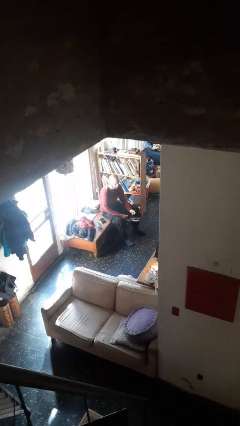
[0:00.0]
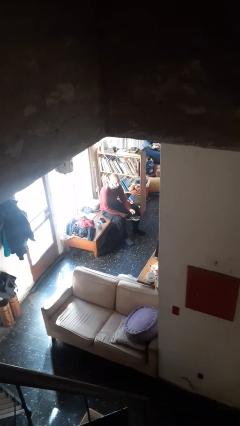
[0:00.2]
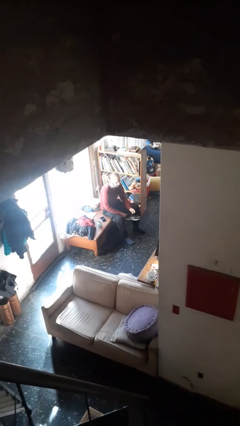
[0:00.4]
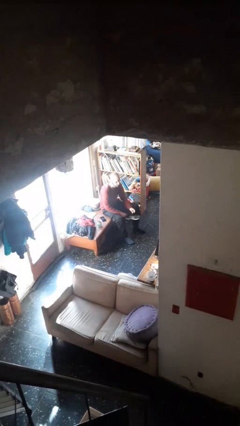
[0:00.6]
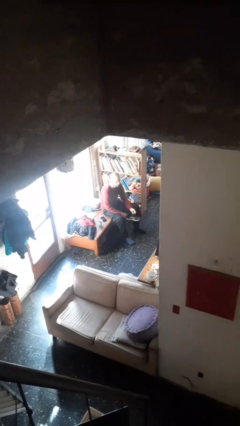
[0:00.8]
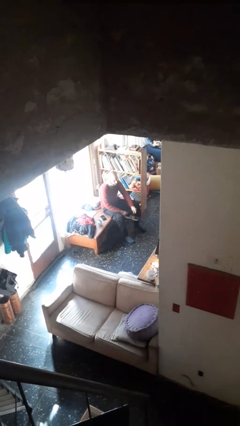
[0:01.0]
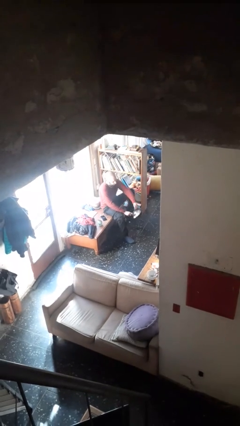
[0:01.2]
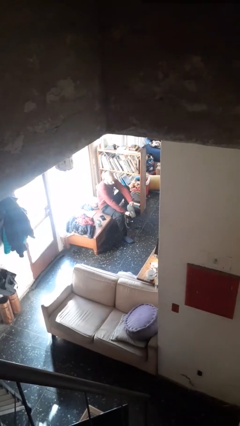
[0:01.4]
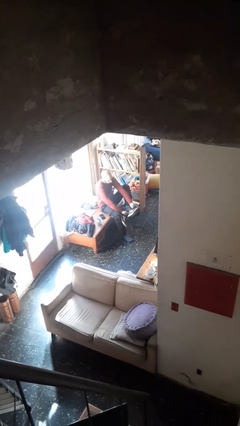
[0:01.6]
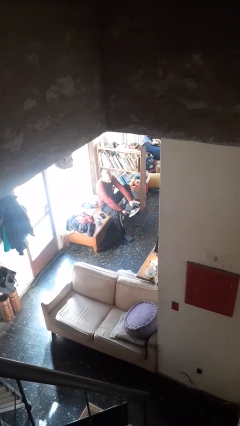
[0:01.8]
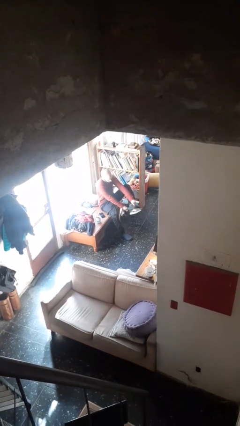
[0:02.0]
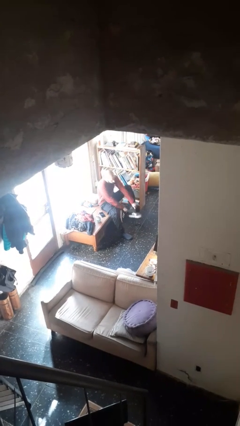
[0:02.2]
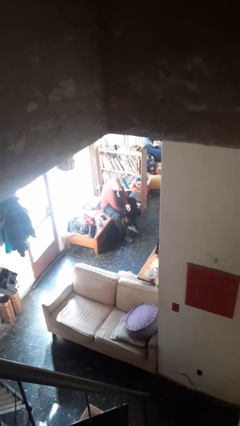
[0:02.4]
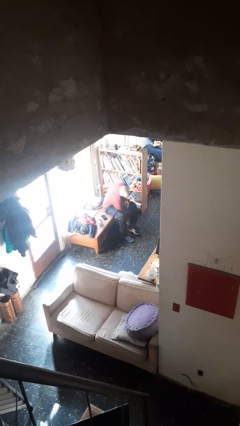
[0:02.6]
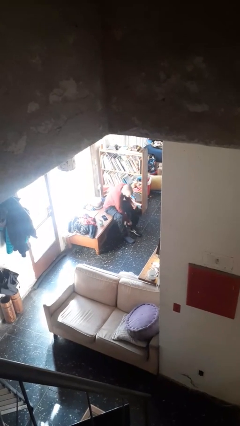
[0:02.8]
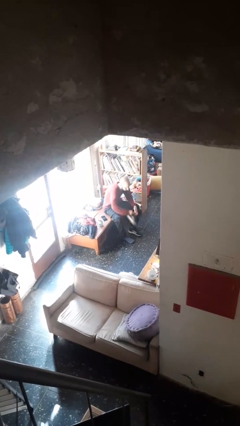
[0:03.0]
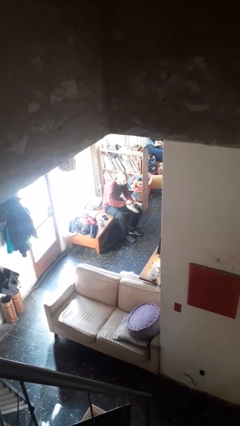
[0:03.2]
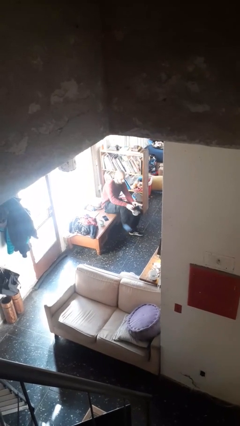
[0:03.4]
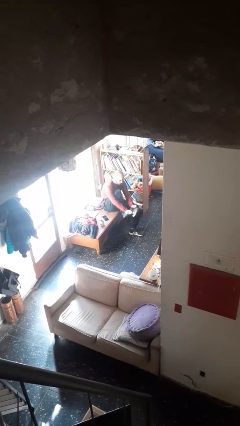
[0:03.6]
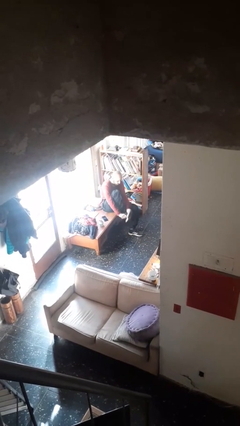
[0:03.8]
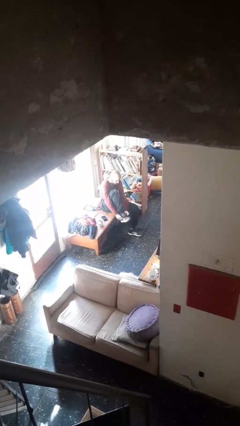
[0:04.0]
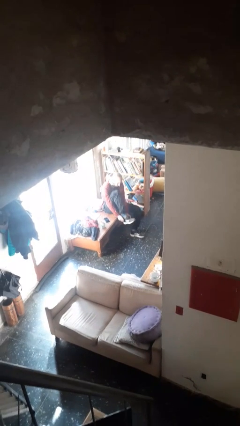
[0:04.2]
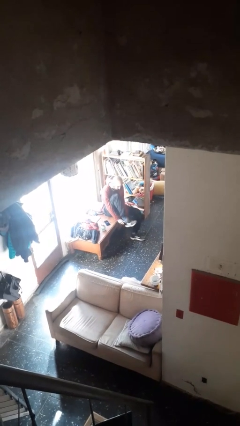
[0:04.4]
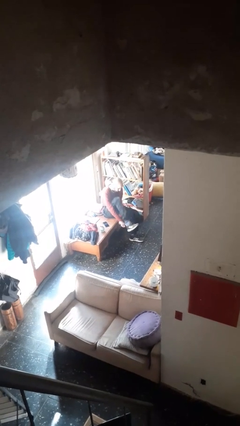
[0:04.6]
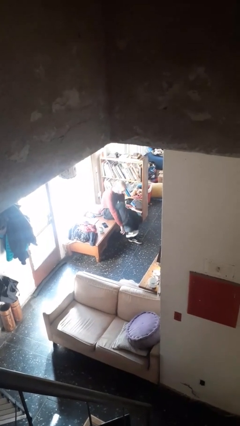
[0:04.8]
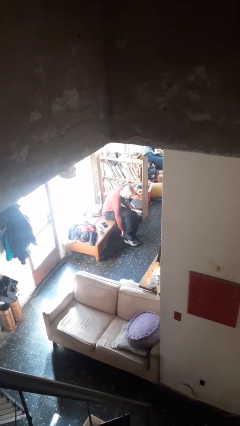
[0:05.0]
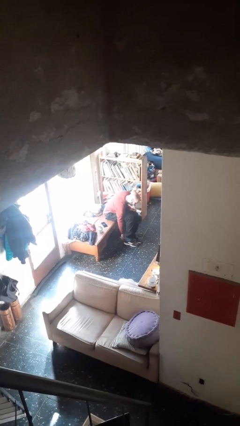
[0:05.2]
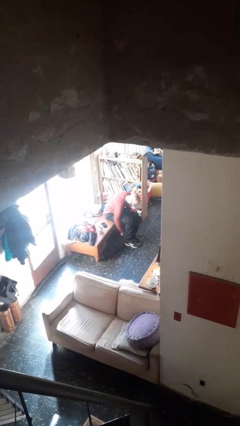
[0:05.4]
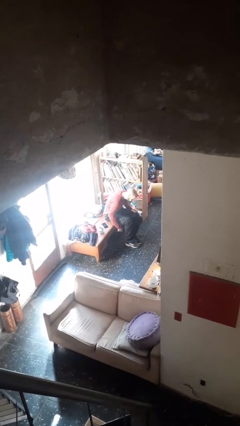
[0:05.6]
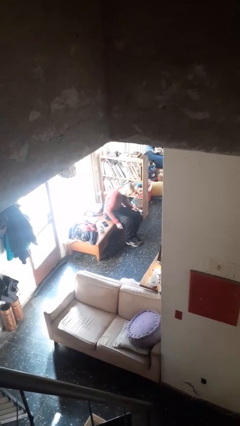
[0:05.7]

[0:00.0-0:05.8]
person puts on shoes

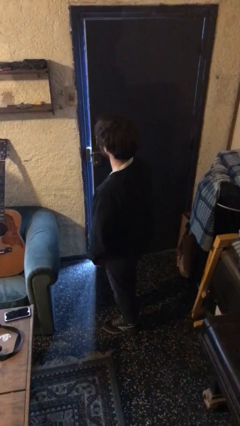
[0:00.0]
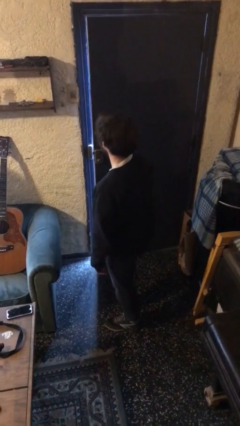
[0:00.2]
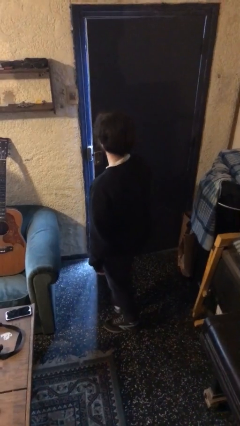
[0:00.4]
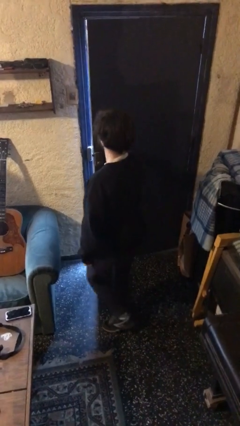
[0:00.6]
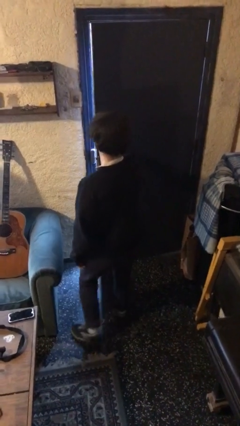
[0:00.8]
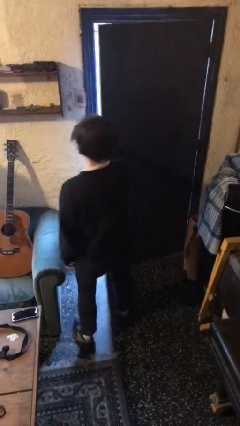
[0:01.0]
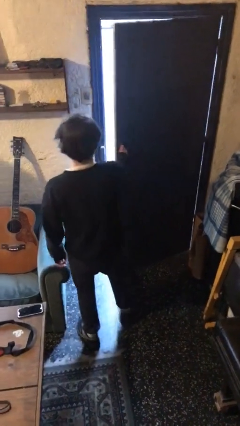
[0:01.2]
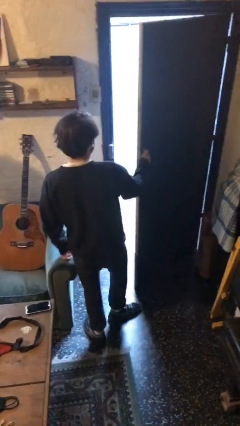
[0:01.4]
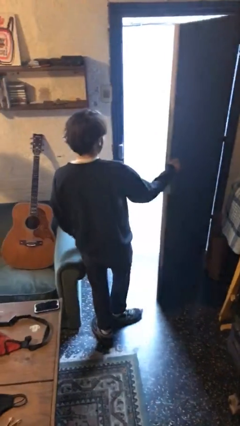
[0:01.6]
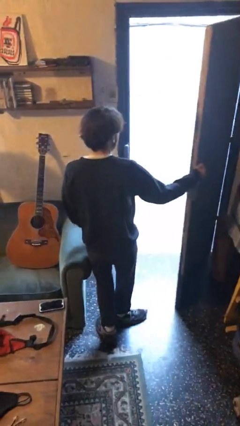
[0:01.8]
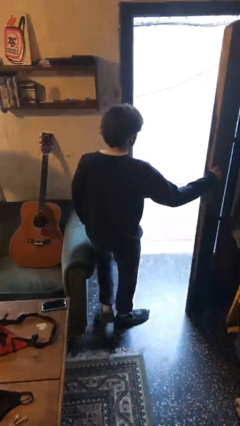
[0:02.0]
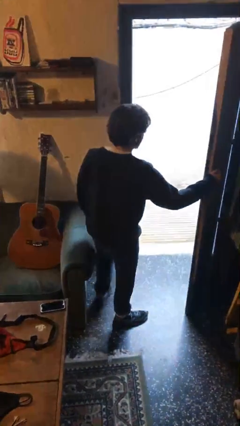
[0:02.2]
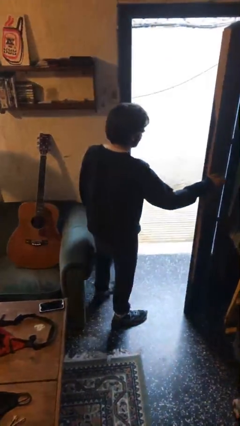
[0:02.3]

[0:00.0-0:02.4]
person opens facility door

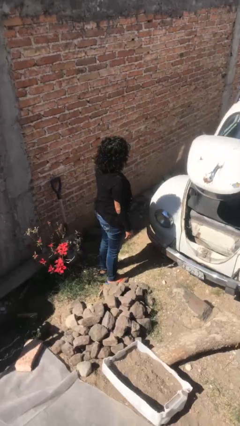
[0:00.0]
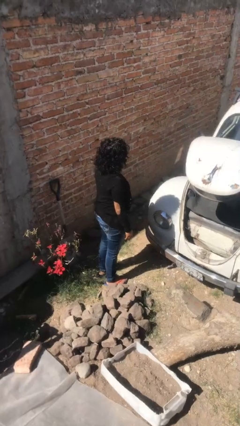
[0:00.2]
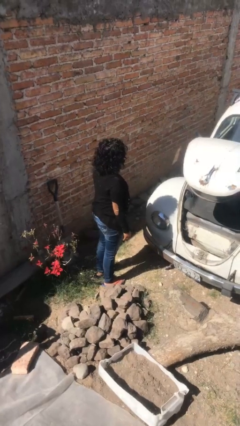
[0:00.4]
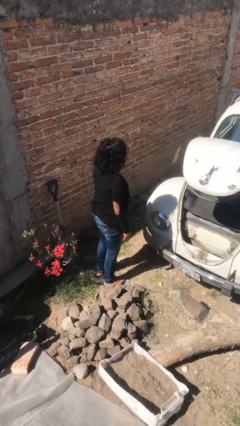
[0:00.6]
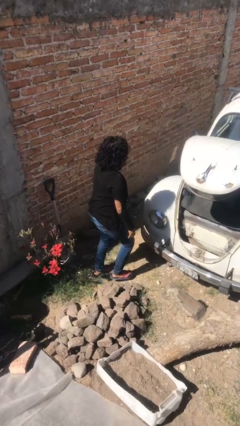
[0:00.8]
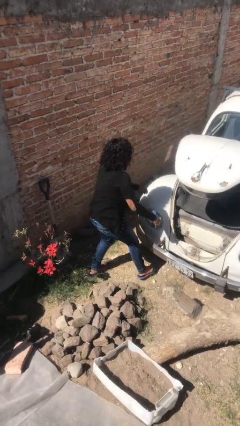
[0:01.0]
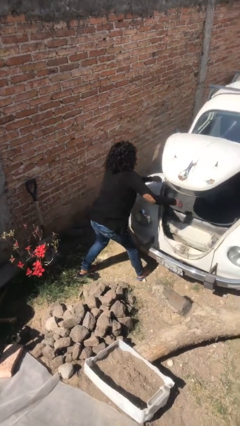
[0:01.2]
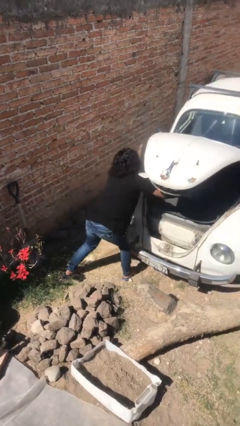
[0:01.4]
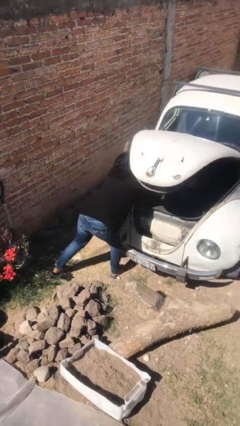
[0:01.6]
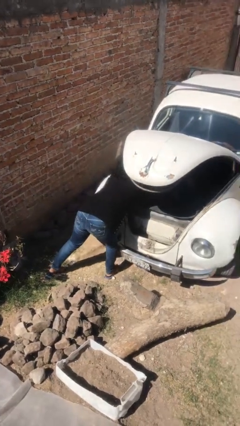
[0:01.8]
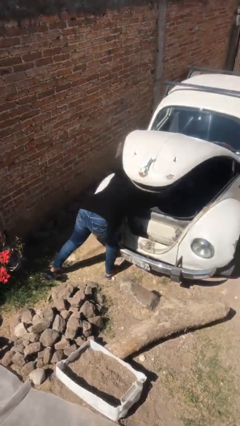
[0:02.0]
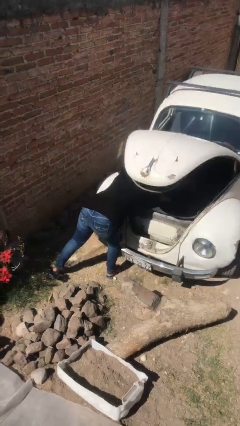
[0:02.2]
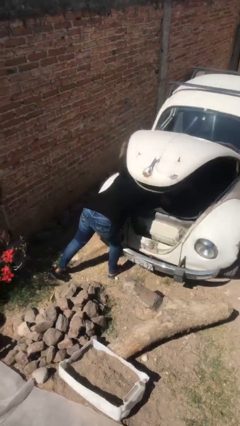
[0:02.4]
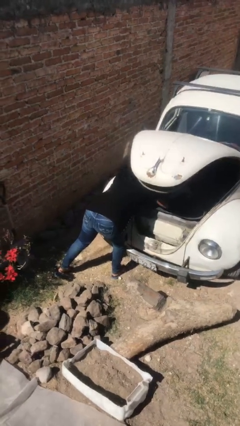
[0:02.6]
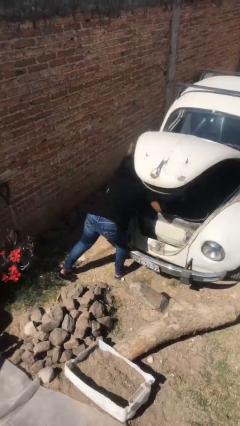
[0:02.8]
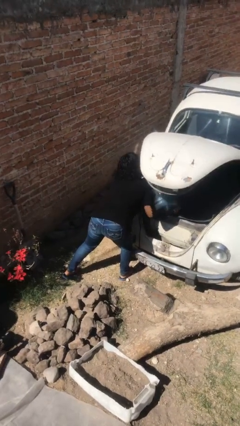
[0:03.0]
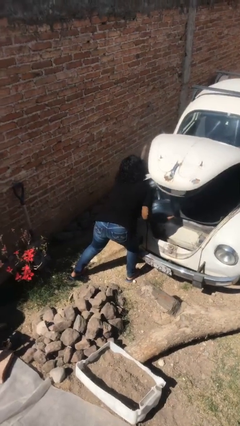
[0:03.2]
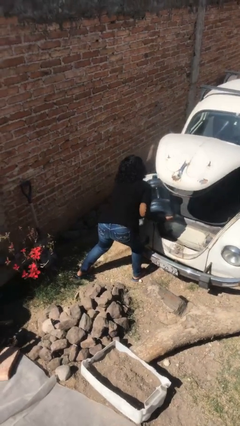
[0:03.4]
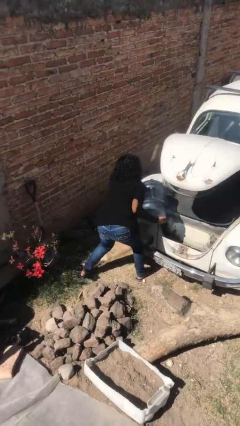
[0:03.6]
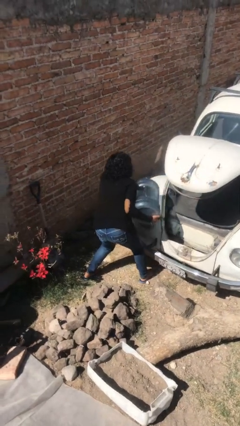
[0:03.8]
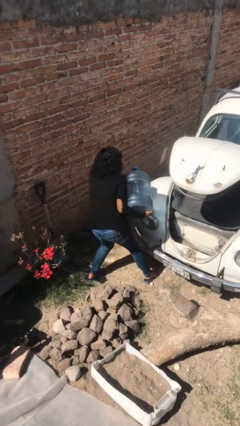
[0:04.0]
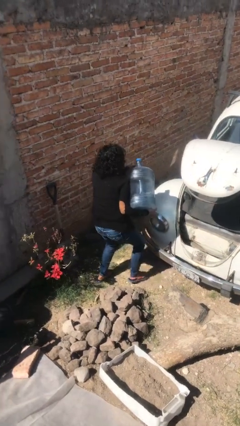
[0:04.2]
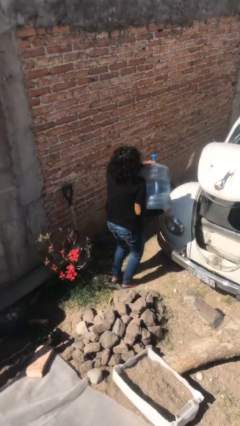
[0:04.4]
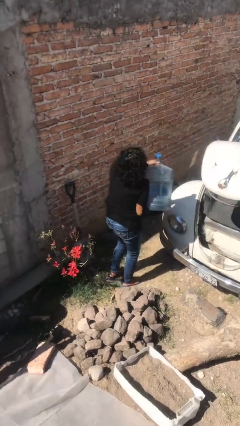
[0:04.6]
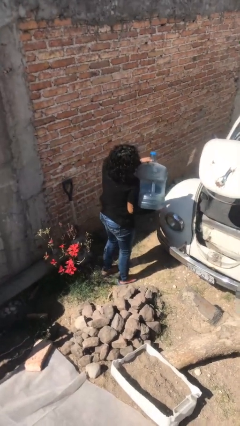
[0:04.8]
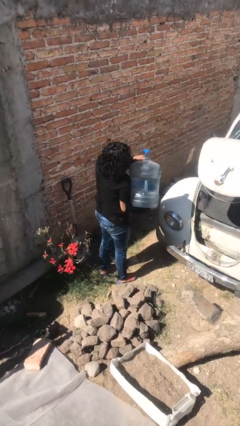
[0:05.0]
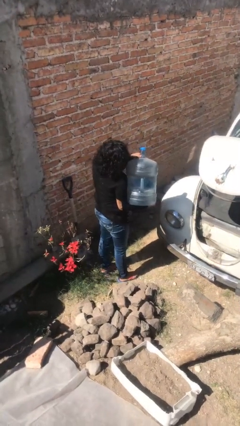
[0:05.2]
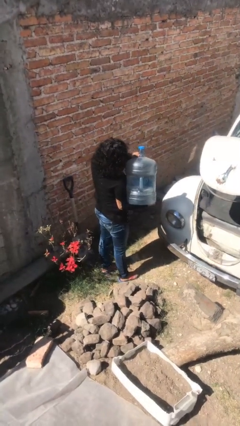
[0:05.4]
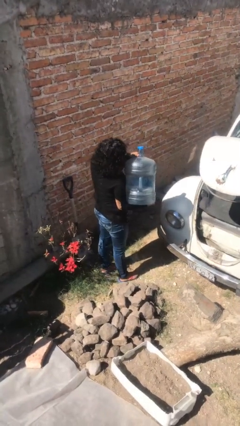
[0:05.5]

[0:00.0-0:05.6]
person unloads car

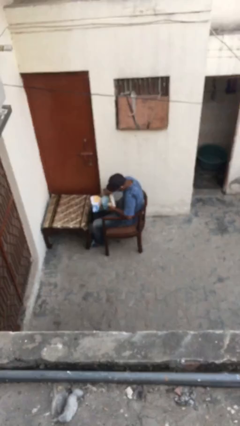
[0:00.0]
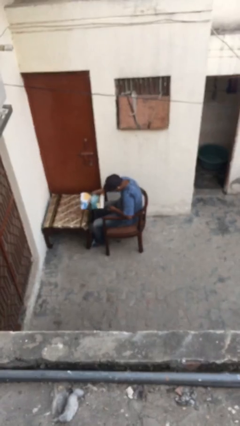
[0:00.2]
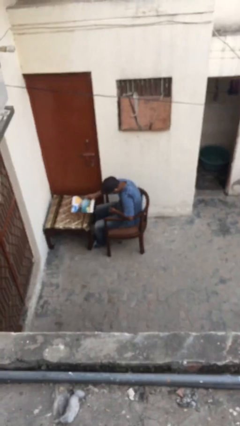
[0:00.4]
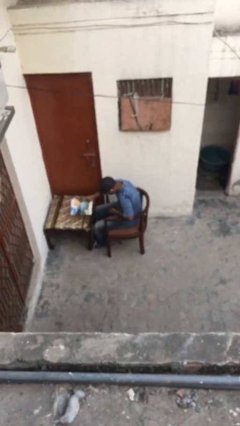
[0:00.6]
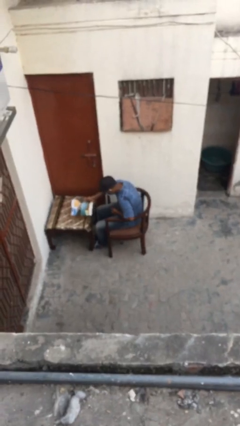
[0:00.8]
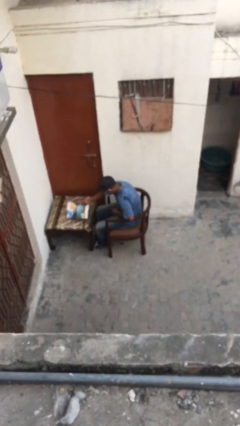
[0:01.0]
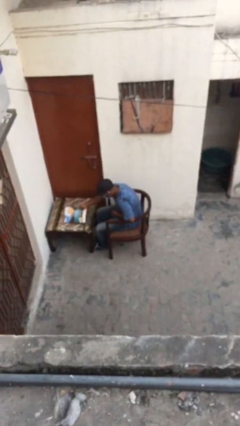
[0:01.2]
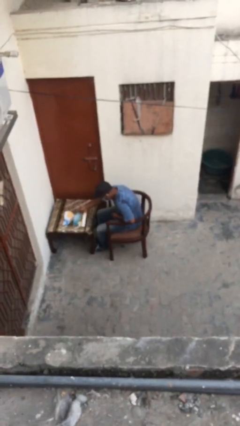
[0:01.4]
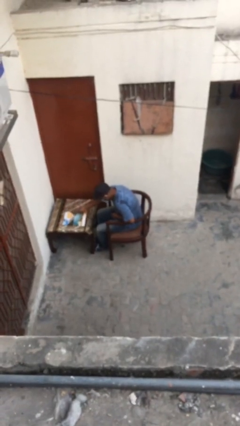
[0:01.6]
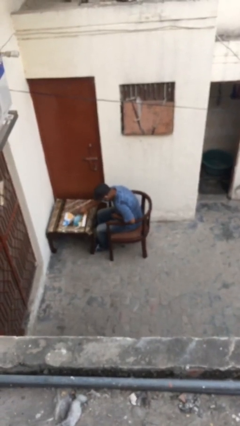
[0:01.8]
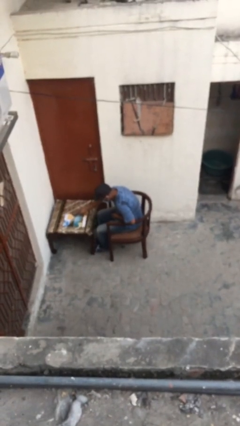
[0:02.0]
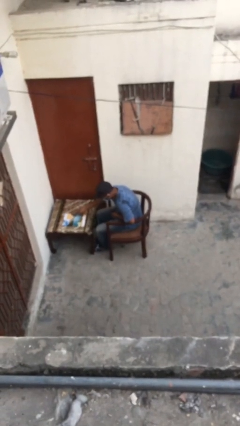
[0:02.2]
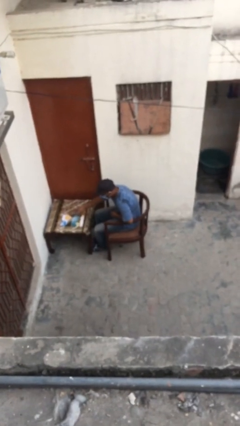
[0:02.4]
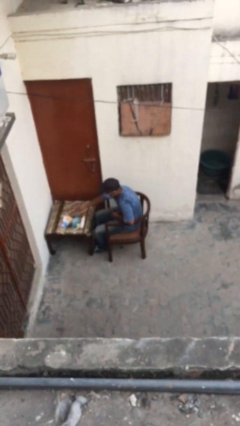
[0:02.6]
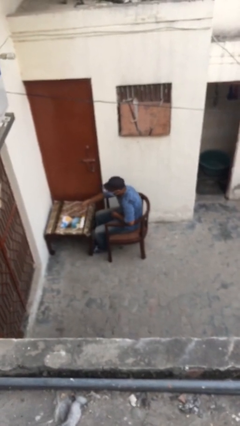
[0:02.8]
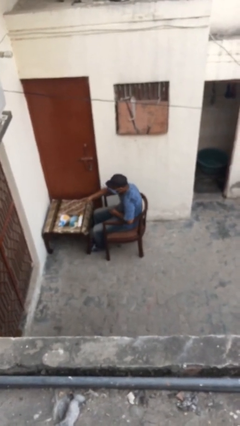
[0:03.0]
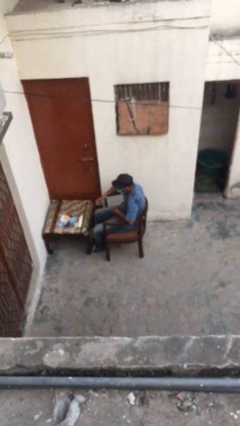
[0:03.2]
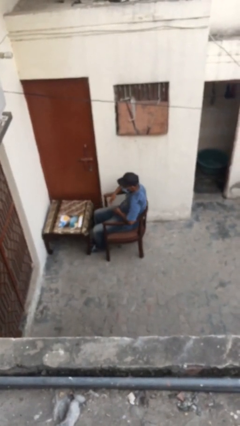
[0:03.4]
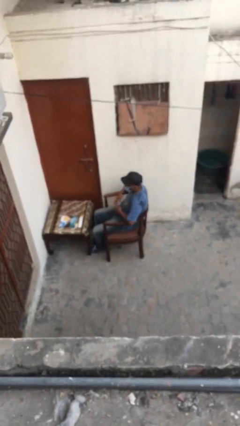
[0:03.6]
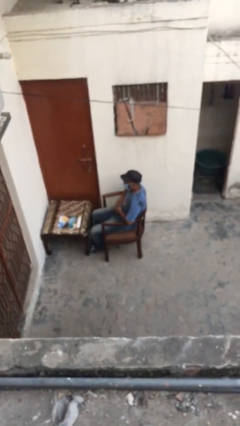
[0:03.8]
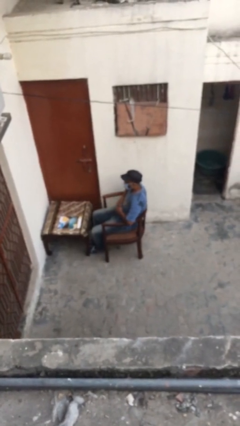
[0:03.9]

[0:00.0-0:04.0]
person puts down object on table
